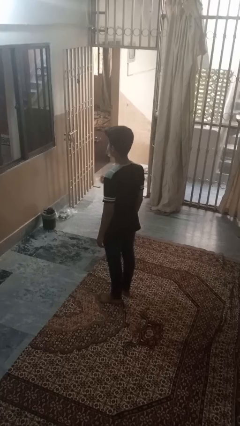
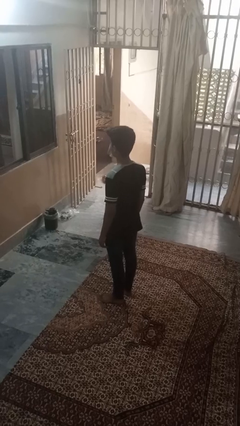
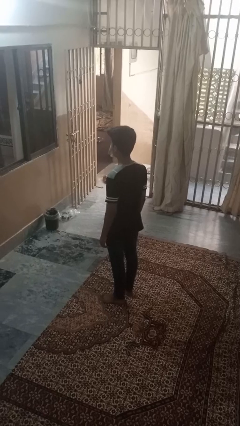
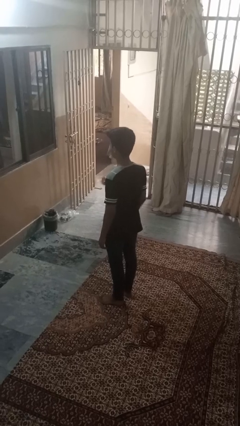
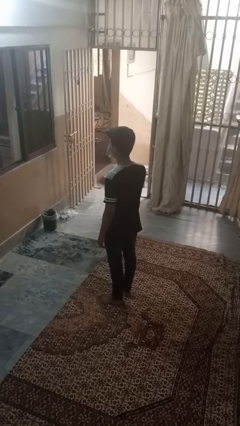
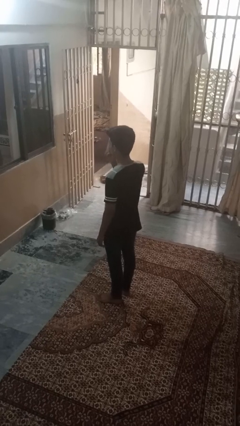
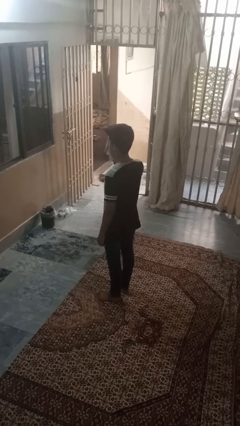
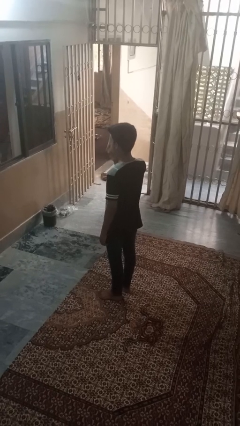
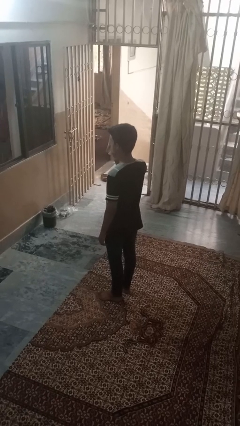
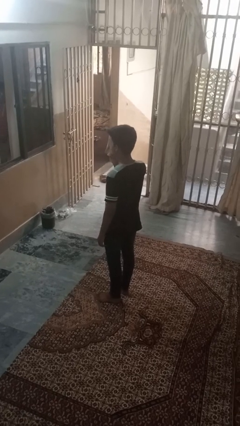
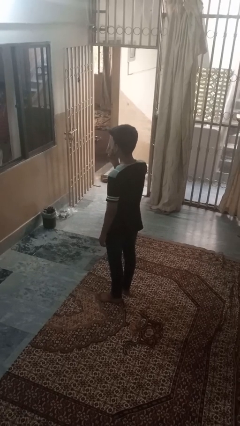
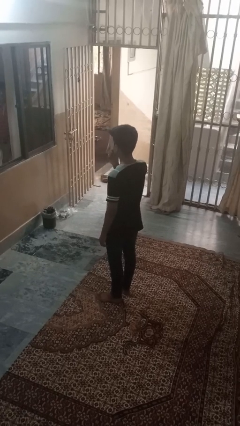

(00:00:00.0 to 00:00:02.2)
person shades eyes

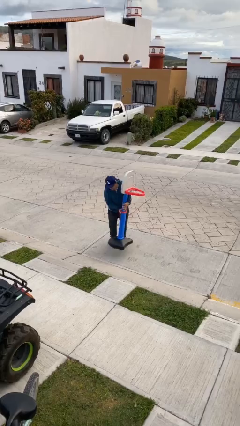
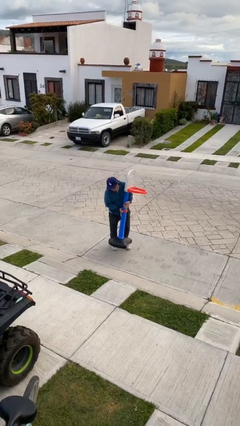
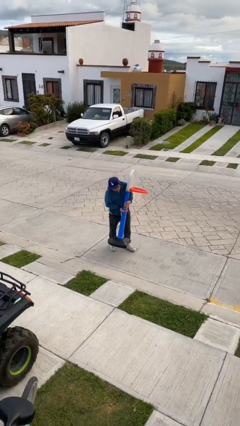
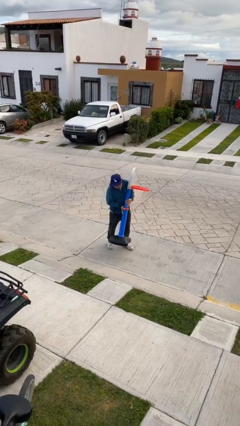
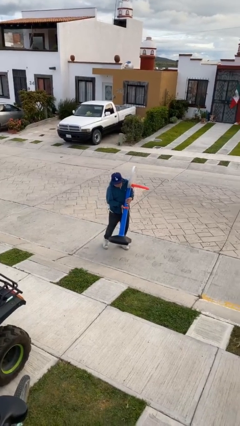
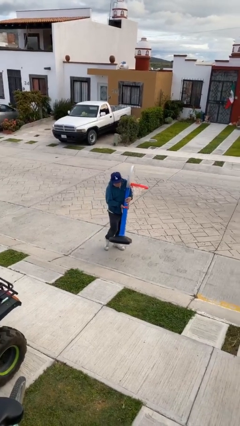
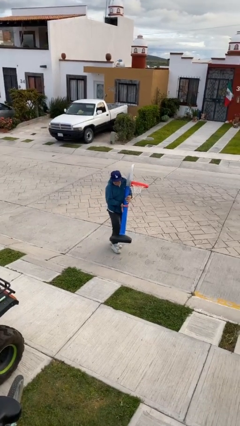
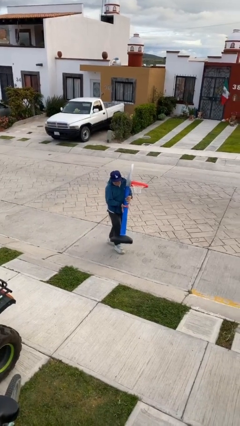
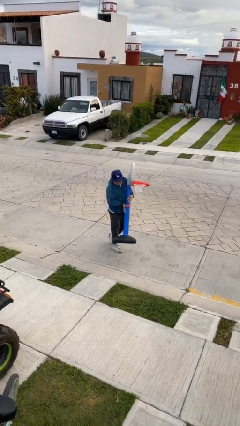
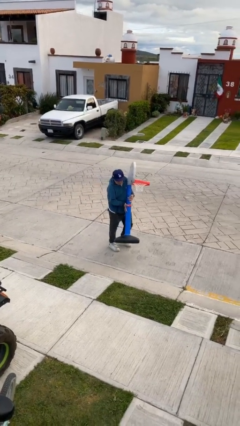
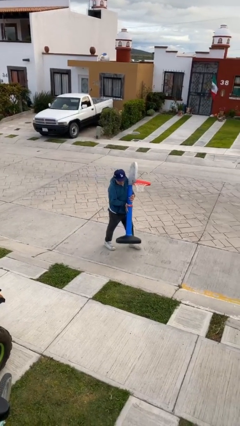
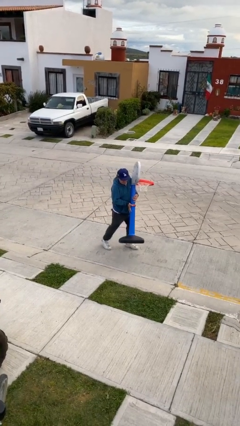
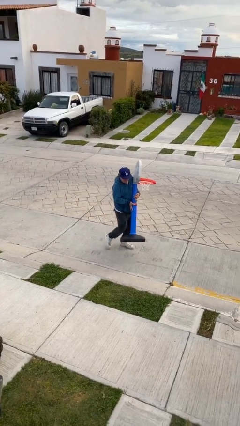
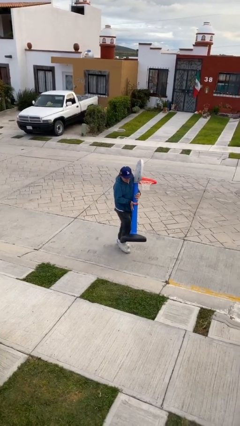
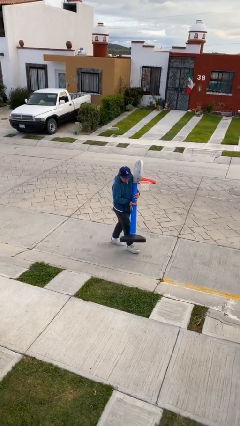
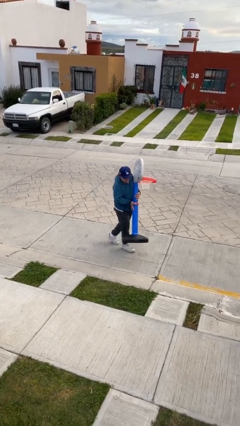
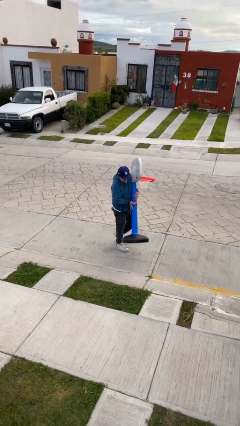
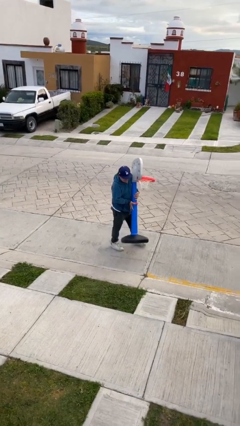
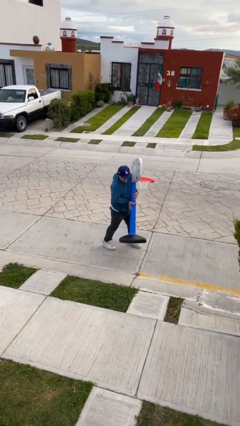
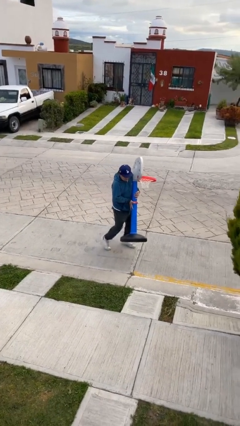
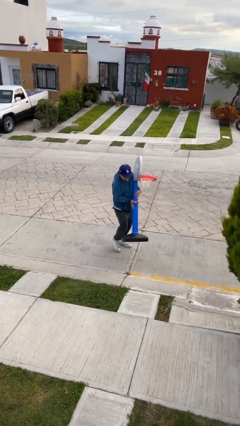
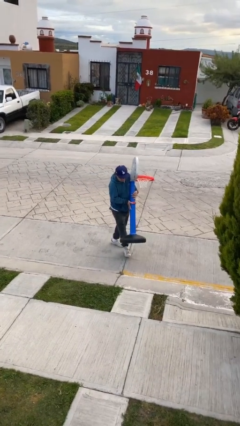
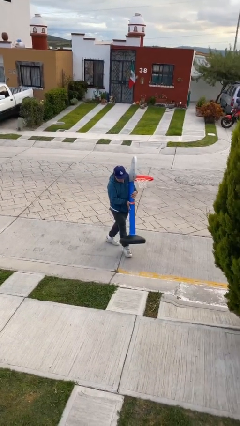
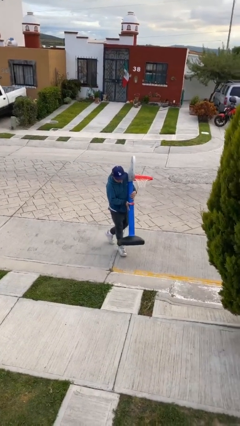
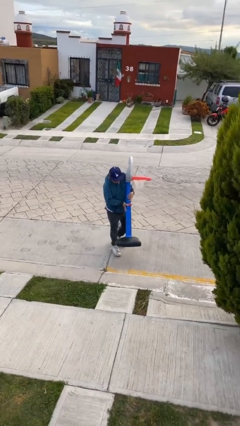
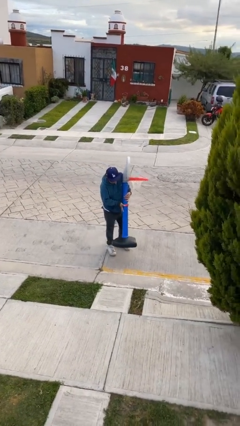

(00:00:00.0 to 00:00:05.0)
person carries heavy object

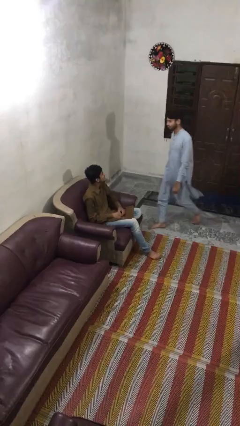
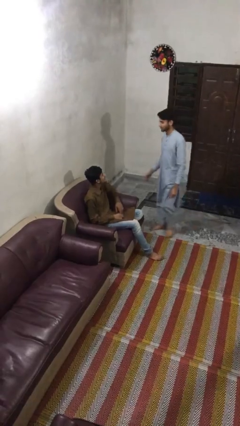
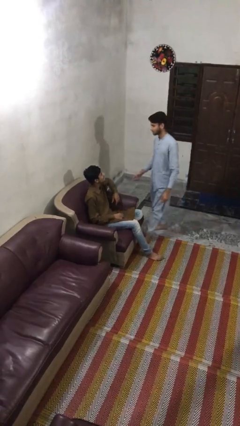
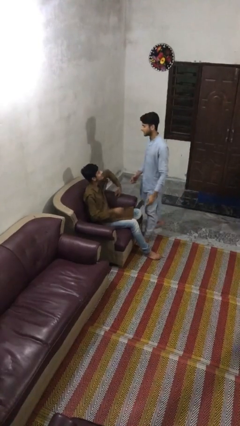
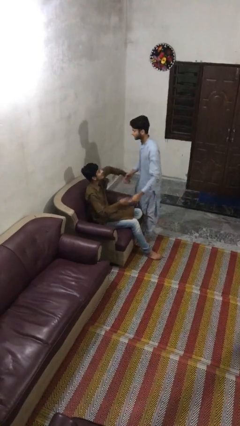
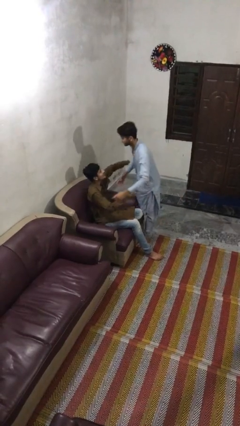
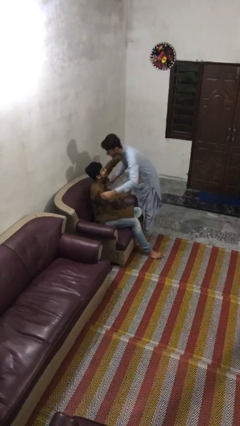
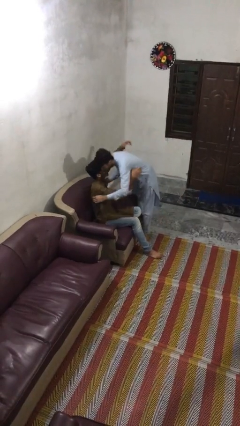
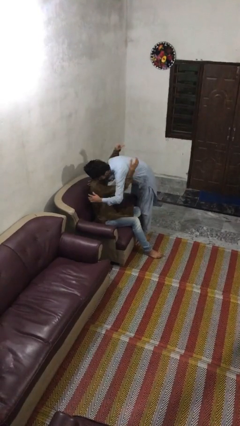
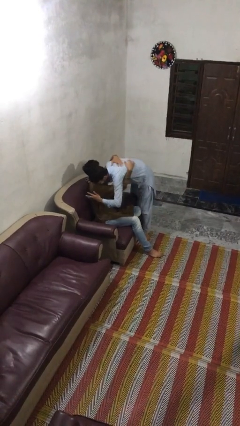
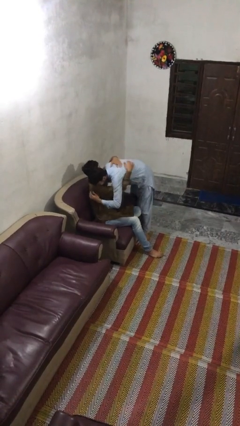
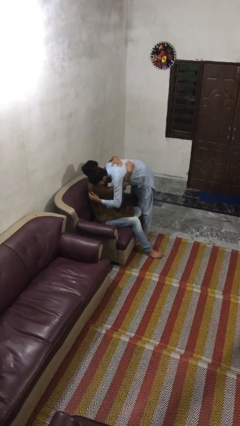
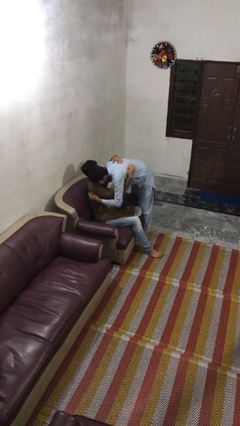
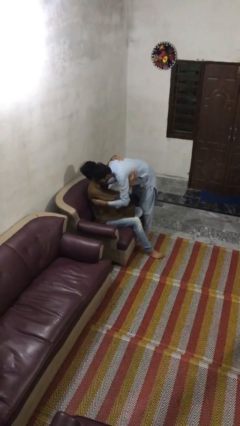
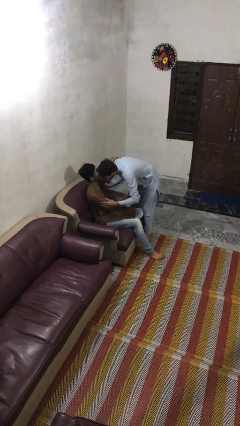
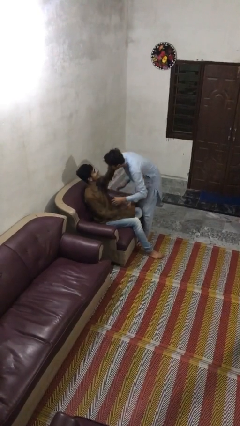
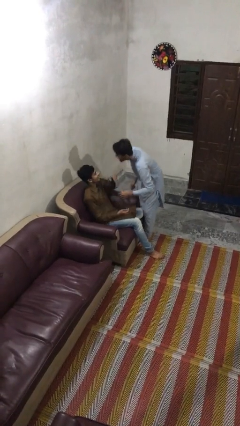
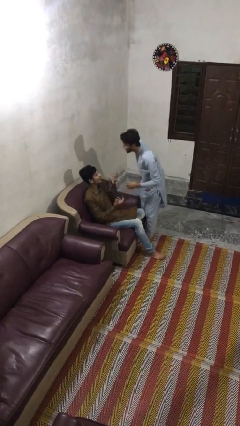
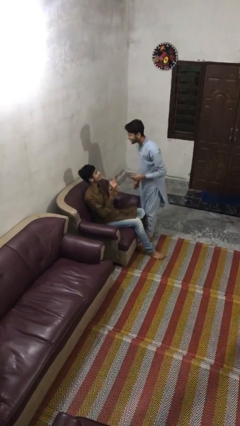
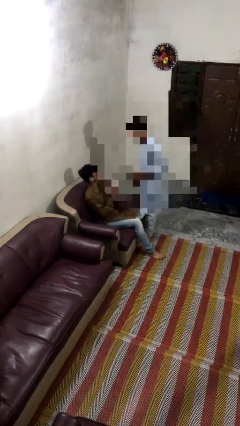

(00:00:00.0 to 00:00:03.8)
person embraces person

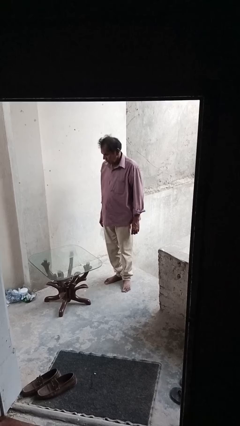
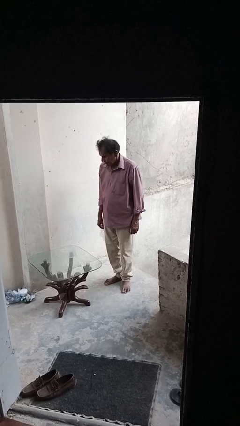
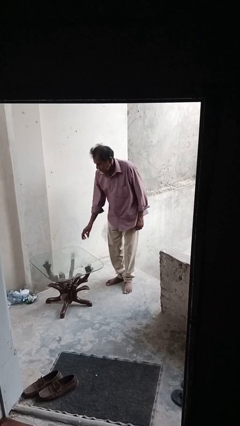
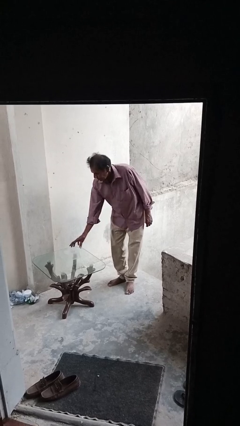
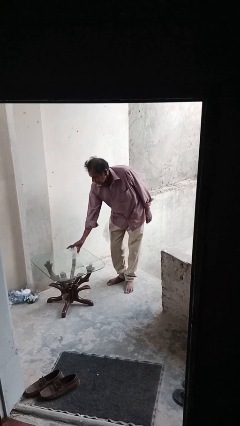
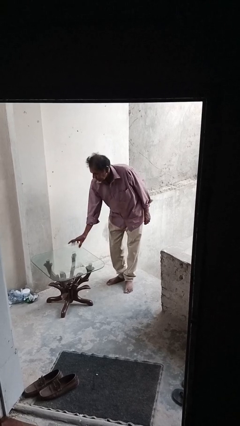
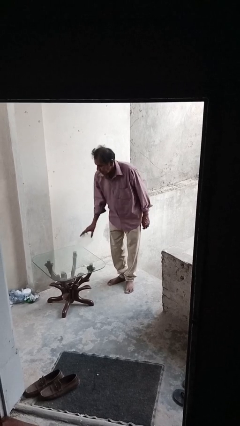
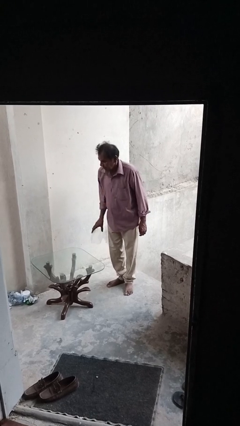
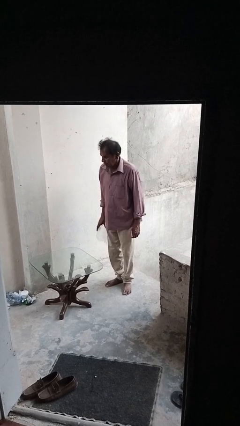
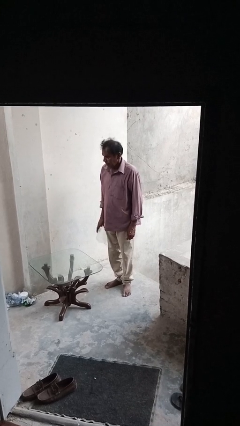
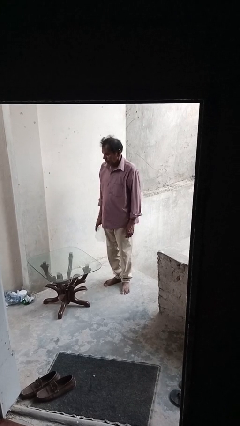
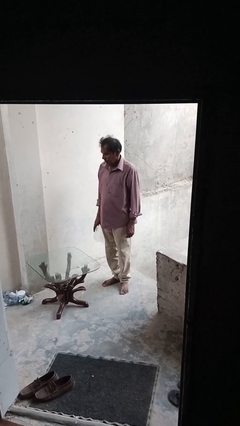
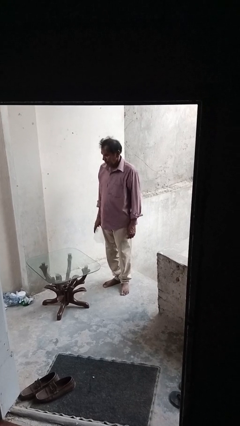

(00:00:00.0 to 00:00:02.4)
person picks up object from table

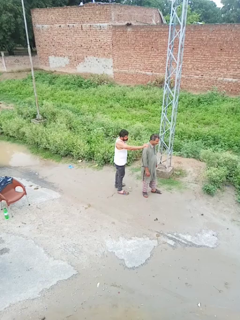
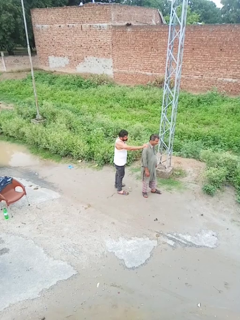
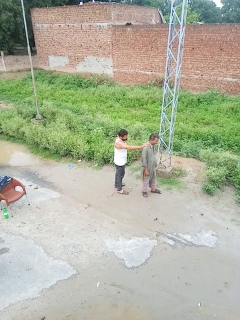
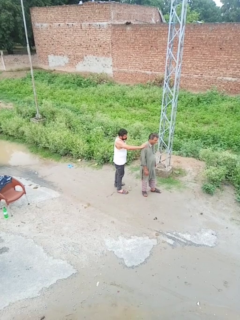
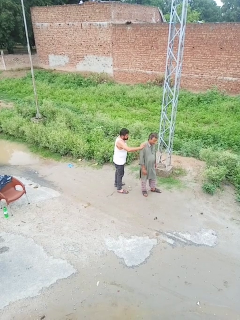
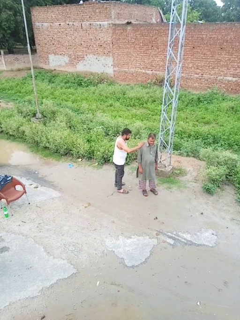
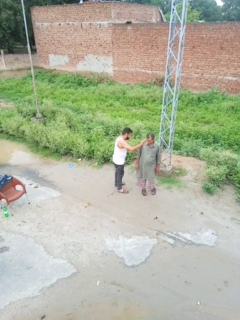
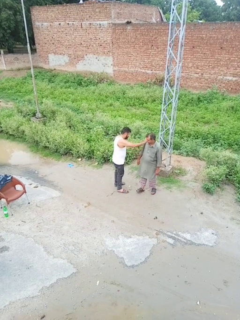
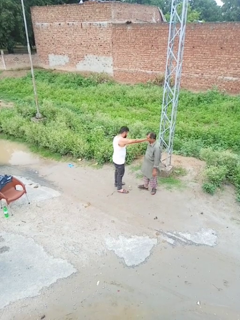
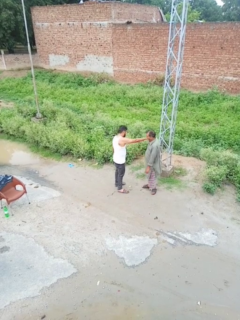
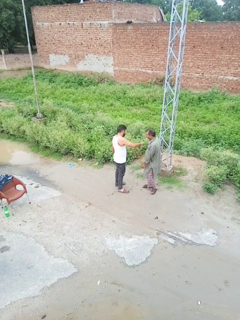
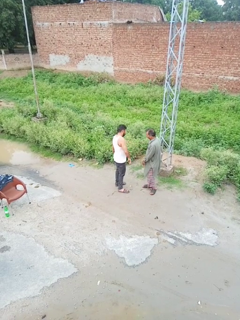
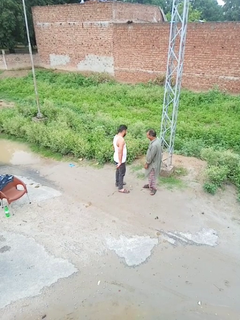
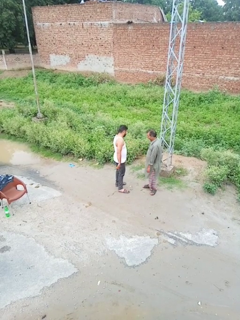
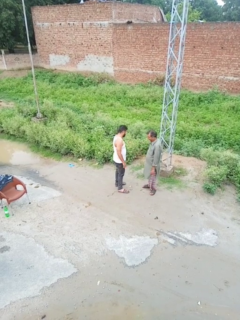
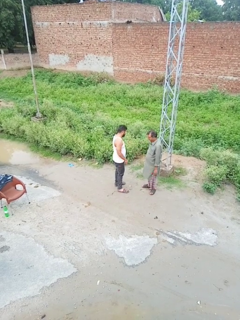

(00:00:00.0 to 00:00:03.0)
person spins person around

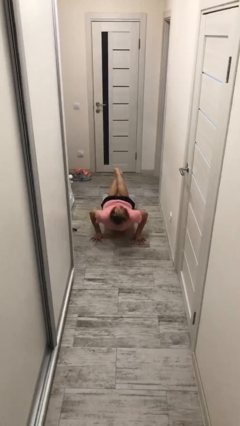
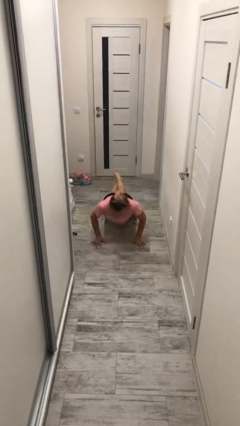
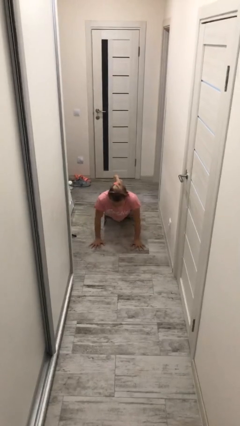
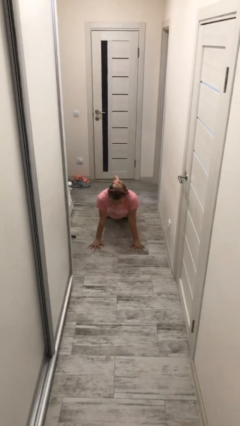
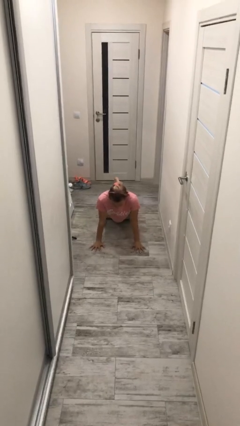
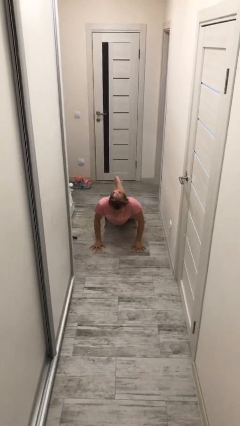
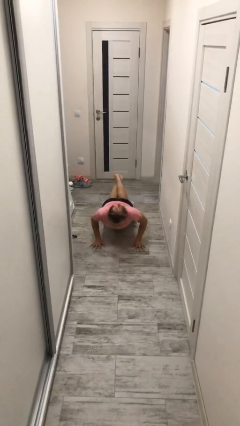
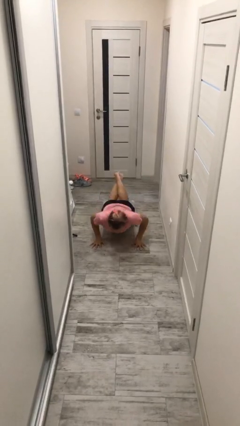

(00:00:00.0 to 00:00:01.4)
person exercises with pushup

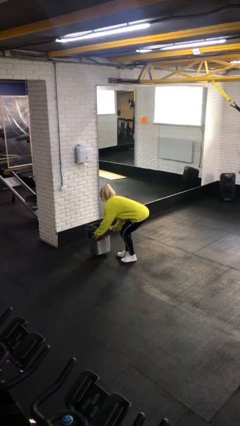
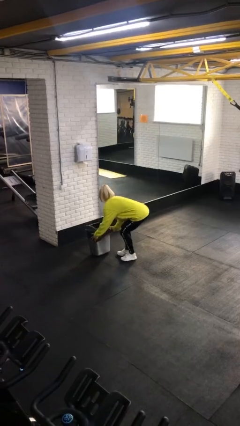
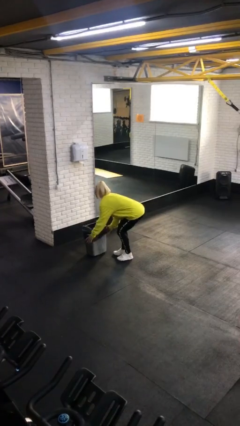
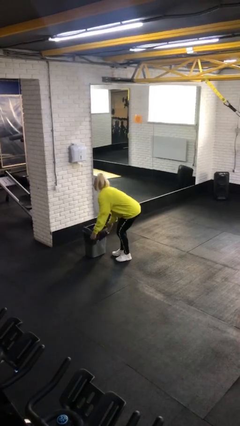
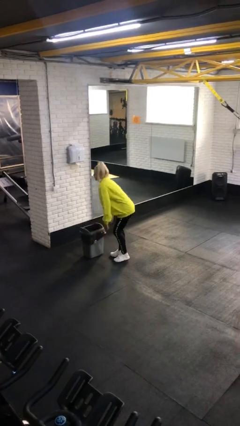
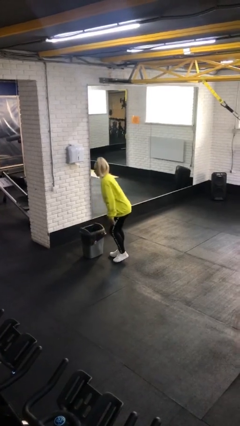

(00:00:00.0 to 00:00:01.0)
person puts down object on floor
